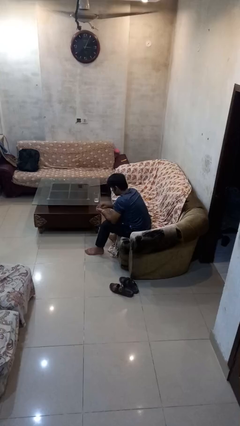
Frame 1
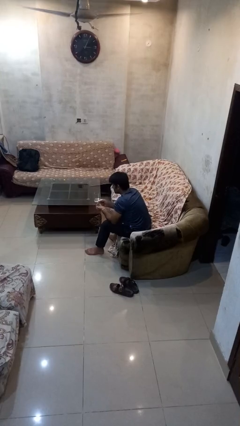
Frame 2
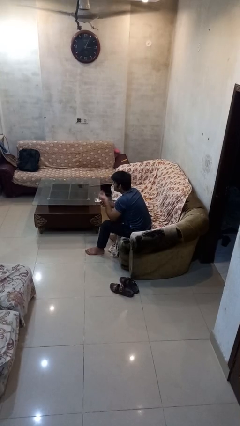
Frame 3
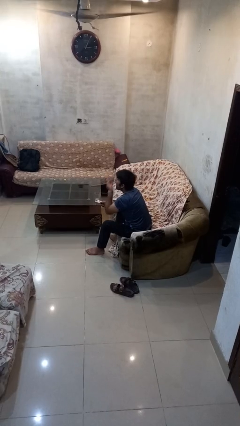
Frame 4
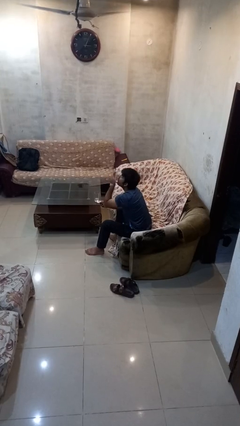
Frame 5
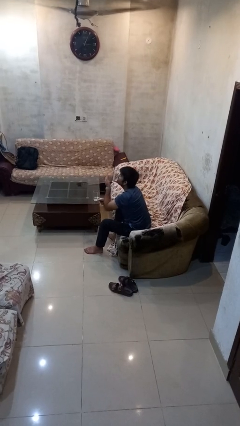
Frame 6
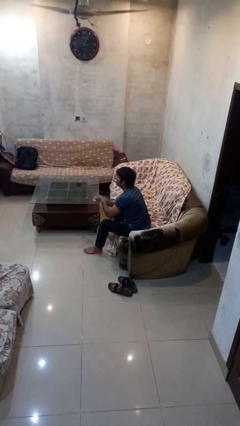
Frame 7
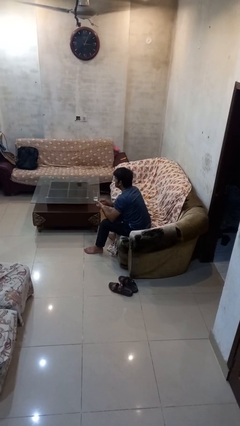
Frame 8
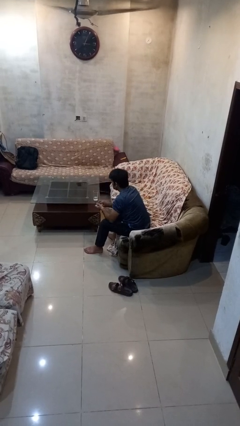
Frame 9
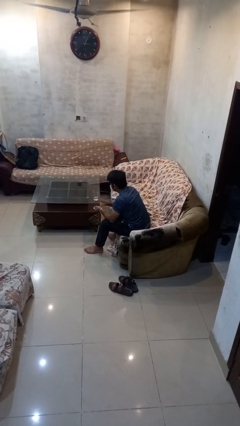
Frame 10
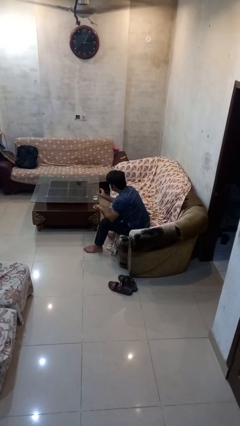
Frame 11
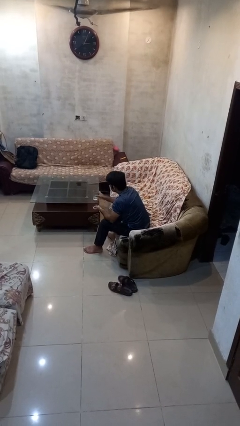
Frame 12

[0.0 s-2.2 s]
person takes medicine pills

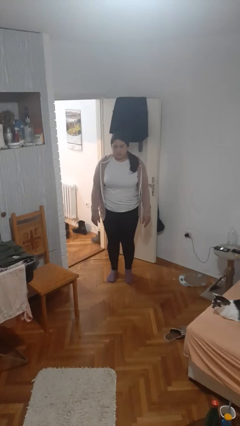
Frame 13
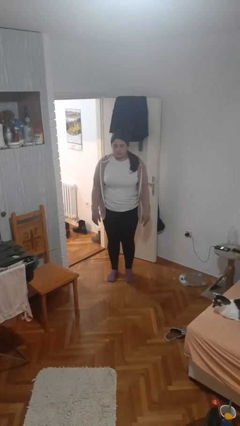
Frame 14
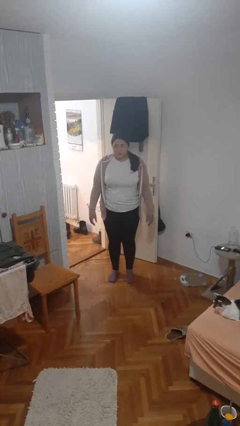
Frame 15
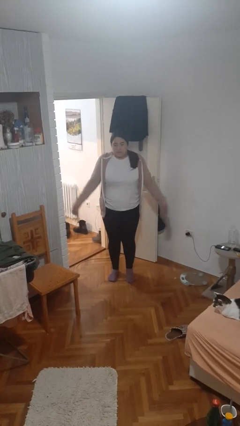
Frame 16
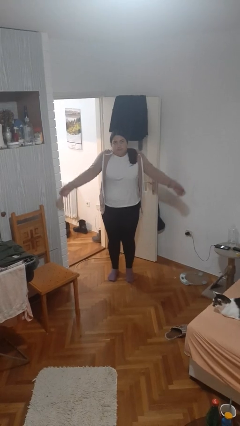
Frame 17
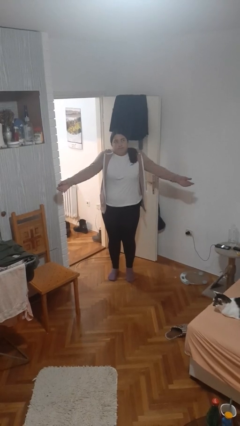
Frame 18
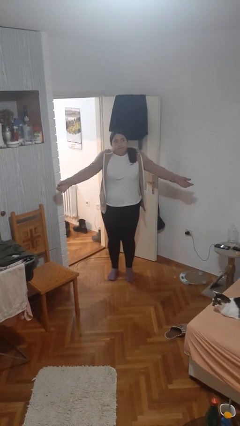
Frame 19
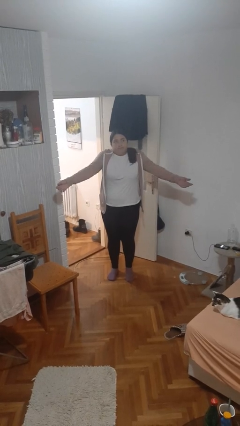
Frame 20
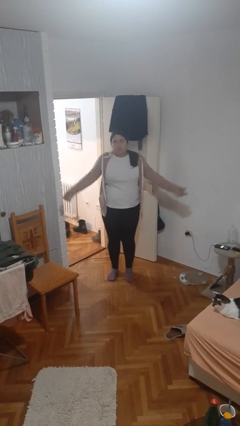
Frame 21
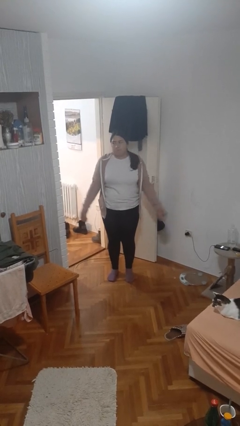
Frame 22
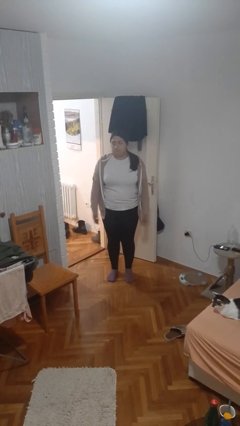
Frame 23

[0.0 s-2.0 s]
person shrugs

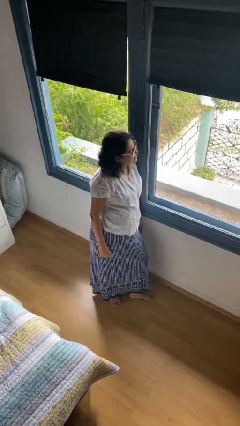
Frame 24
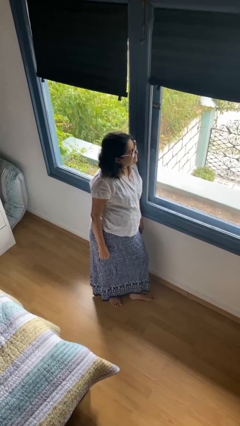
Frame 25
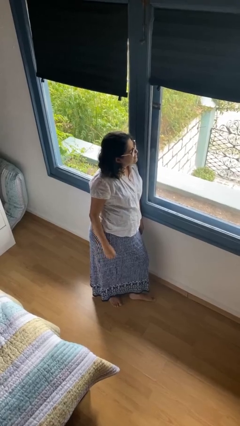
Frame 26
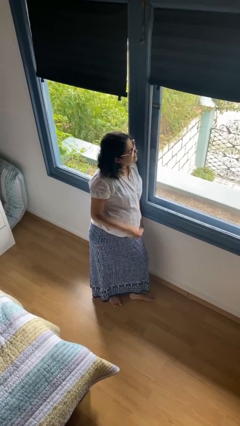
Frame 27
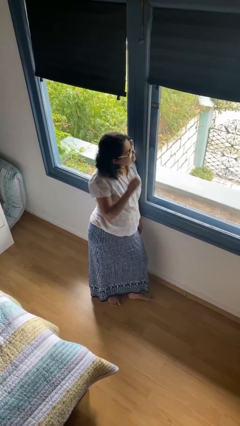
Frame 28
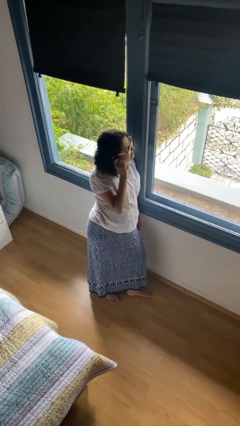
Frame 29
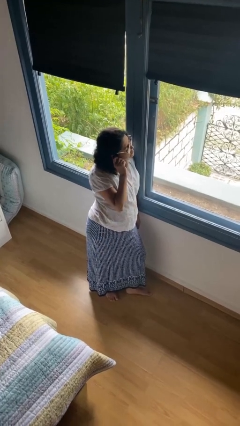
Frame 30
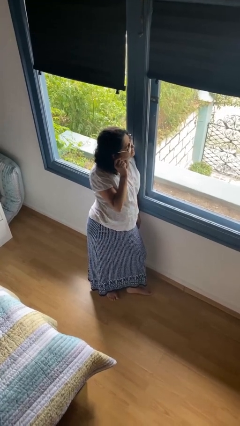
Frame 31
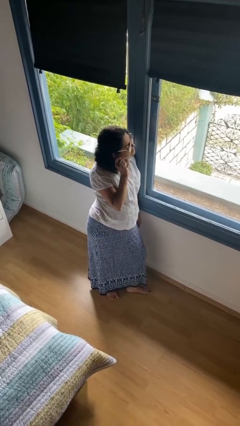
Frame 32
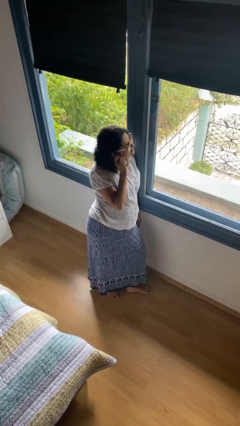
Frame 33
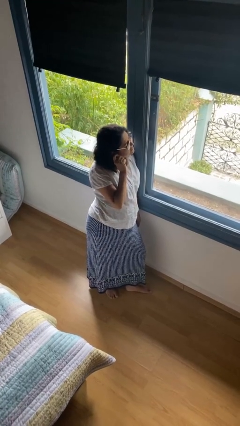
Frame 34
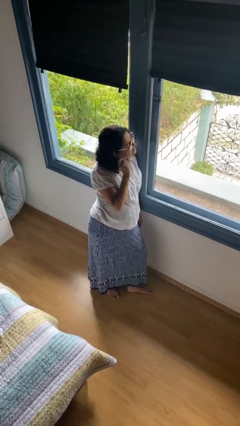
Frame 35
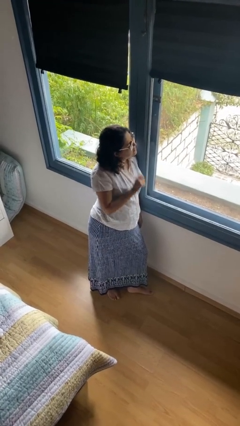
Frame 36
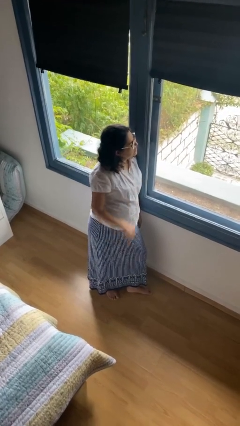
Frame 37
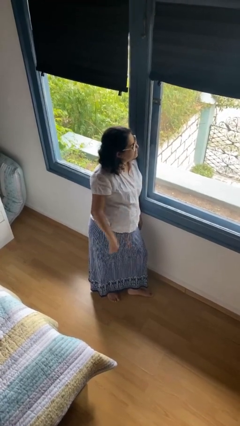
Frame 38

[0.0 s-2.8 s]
person touches earlobe

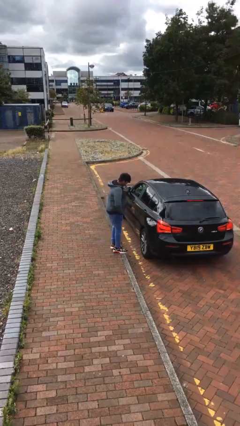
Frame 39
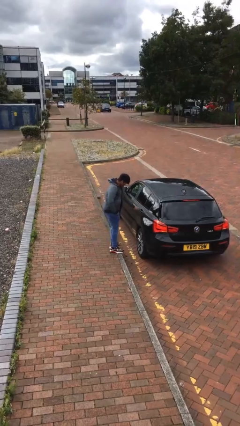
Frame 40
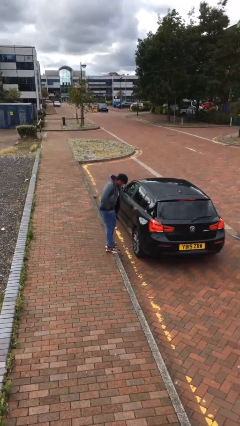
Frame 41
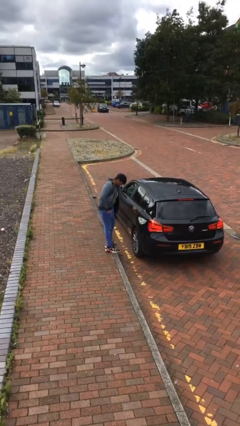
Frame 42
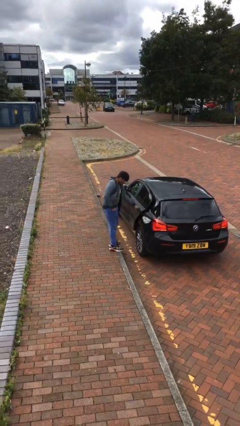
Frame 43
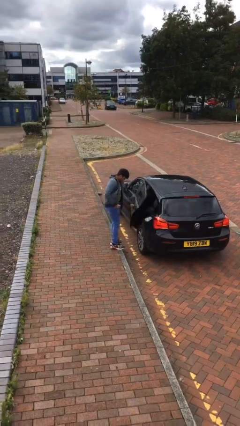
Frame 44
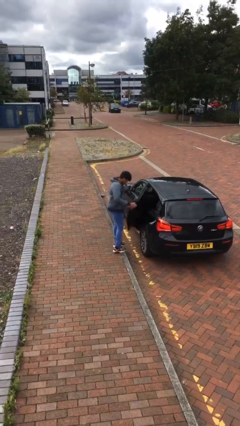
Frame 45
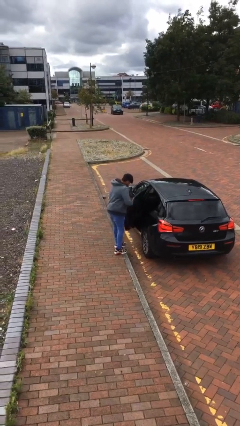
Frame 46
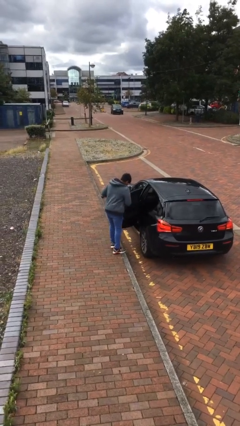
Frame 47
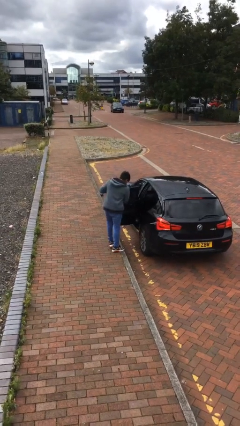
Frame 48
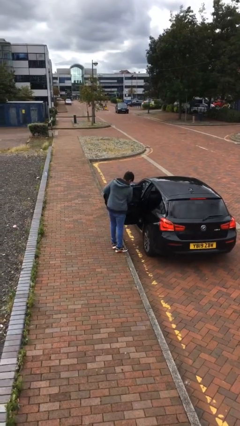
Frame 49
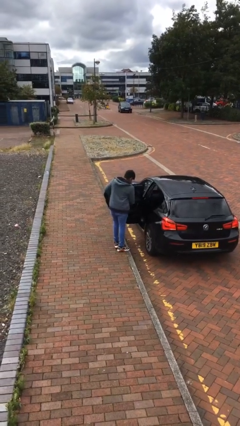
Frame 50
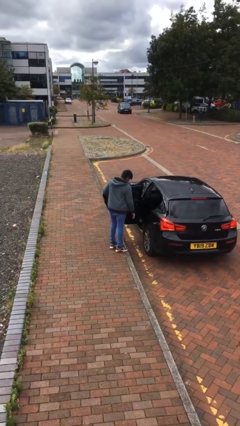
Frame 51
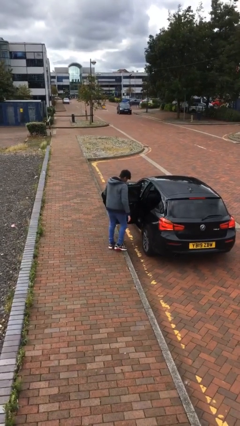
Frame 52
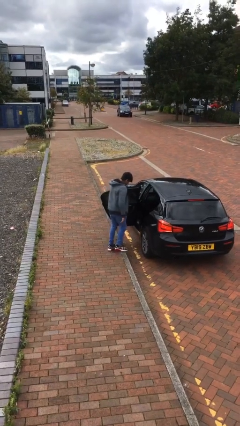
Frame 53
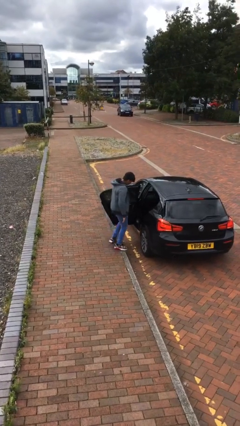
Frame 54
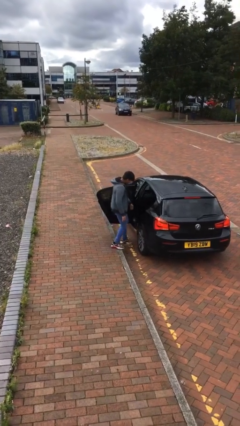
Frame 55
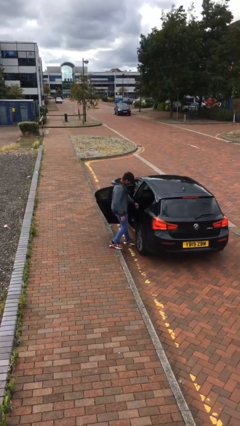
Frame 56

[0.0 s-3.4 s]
person opens car door

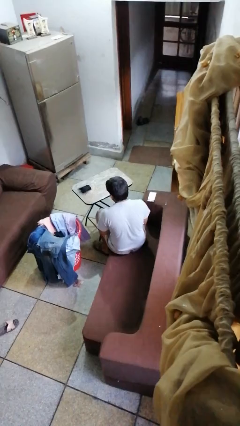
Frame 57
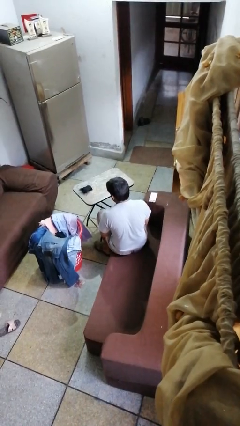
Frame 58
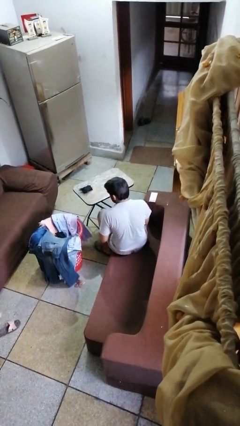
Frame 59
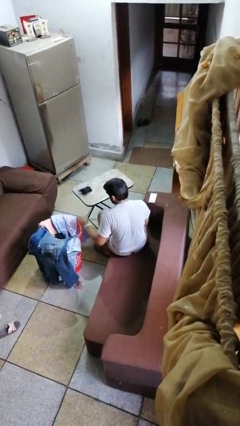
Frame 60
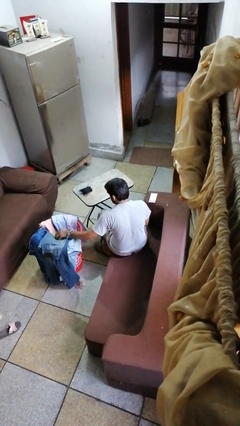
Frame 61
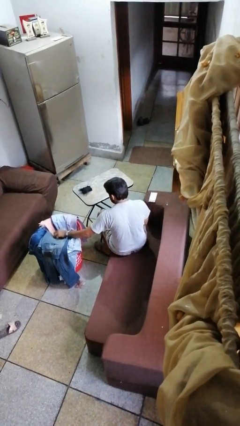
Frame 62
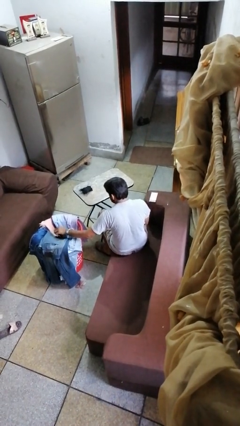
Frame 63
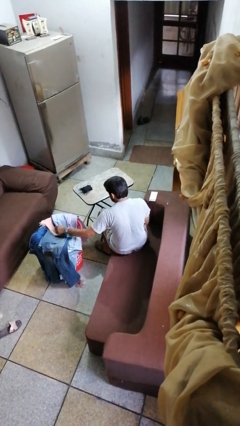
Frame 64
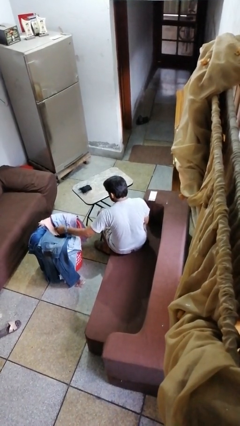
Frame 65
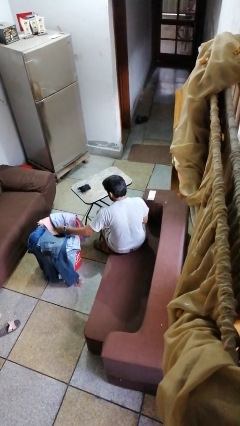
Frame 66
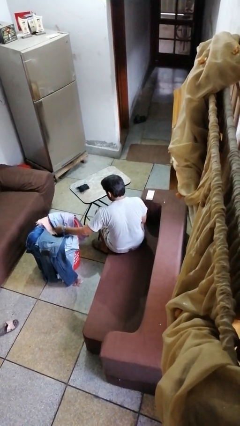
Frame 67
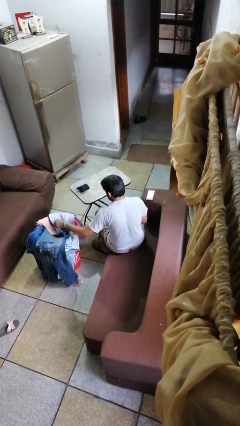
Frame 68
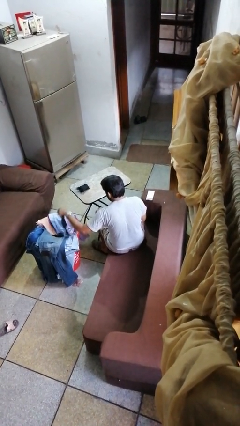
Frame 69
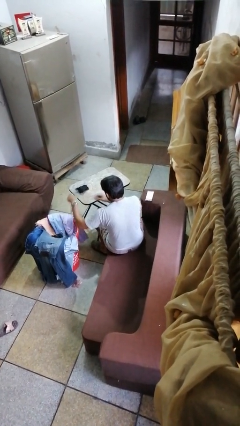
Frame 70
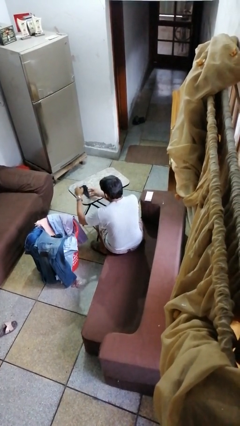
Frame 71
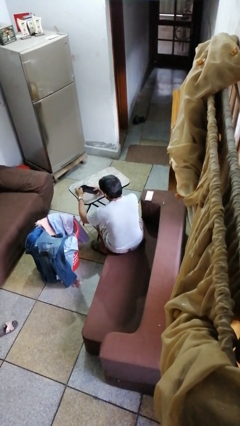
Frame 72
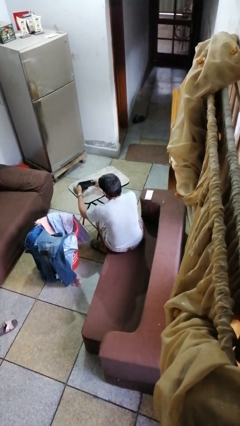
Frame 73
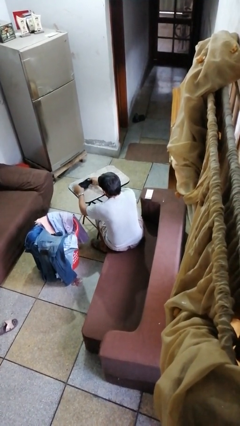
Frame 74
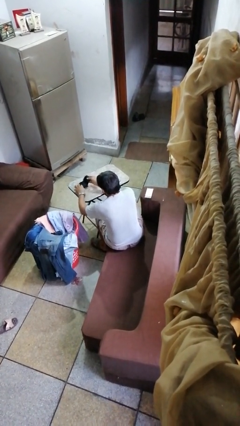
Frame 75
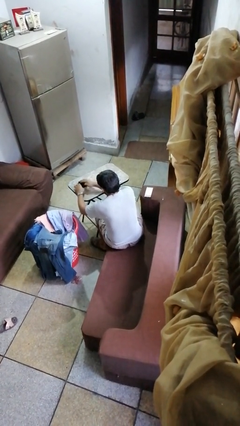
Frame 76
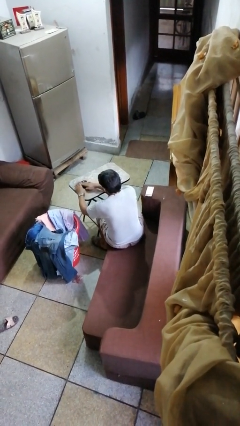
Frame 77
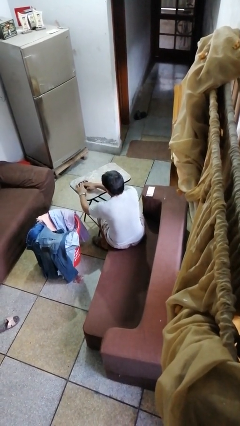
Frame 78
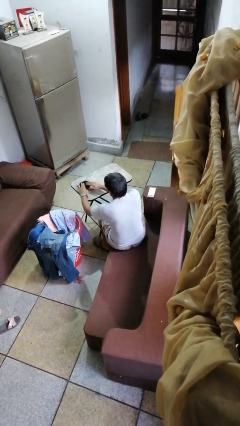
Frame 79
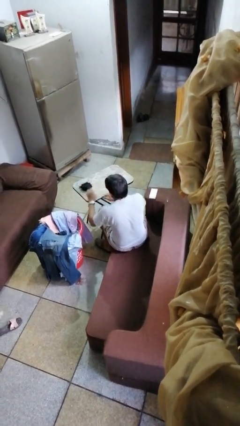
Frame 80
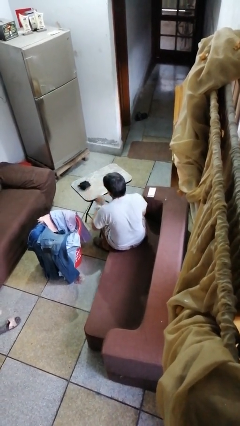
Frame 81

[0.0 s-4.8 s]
person folds socks

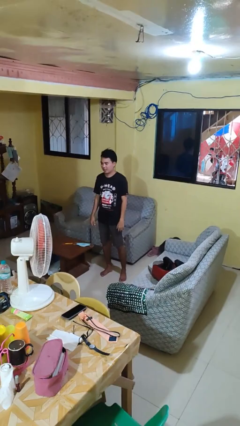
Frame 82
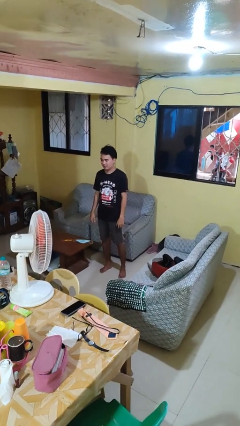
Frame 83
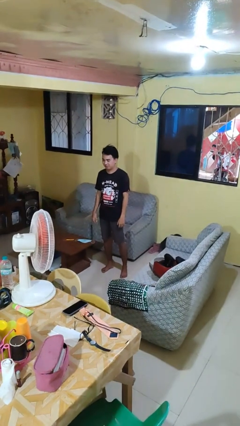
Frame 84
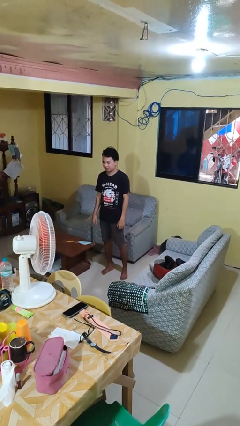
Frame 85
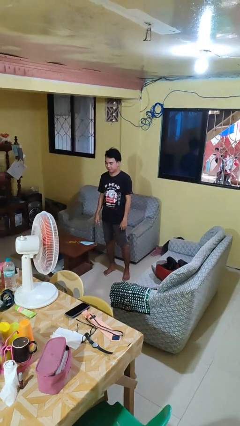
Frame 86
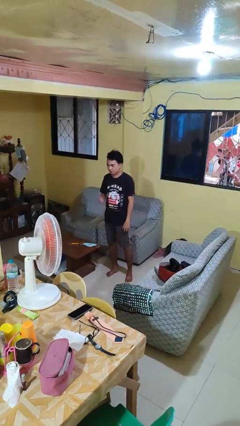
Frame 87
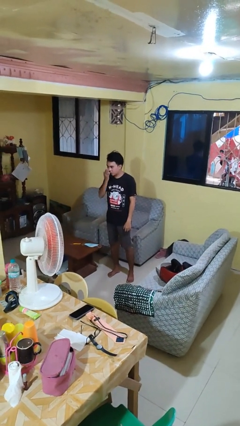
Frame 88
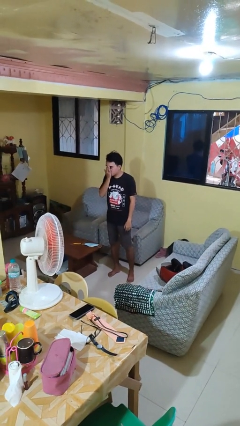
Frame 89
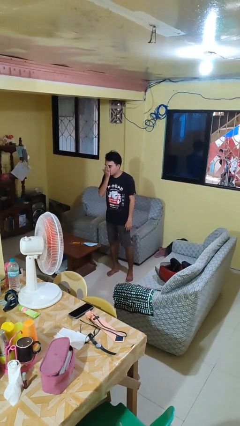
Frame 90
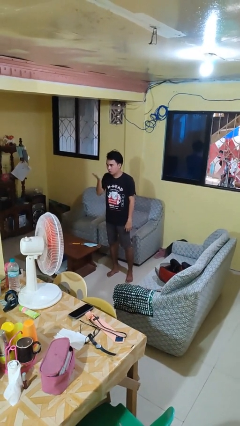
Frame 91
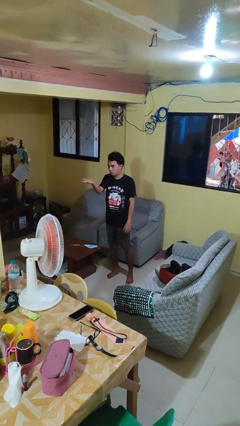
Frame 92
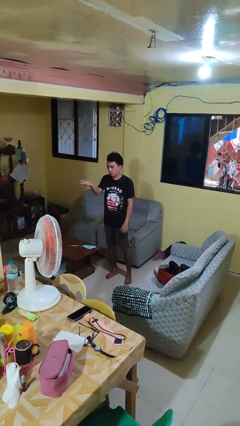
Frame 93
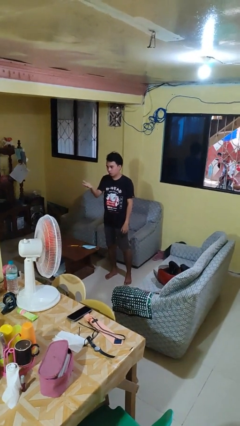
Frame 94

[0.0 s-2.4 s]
person gestures blow kiss

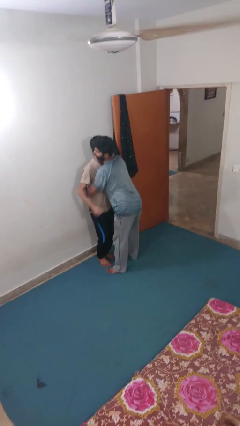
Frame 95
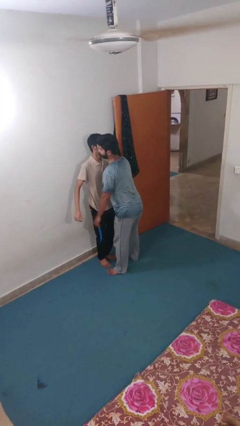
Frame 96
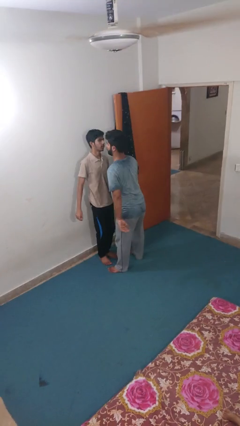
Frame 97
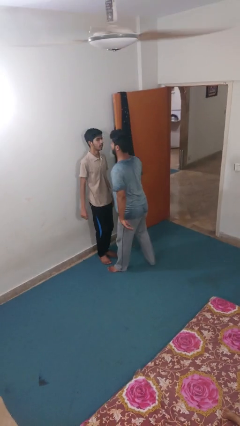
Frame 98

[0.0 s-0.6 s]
person puts down person
